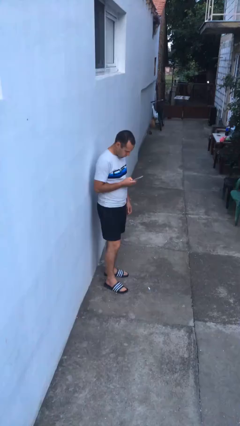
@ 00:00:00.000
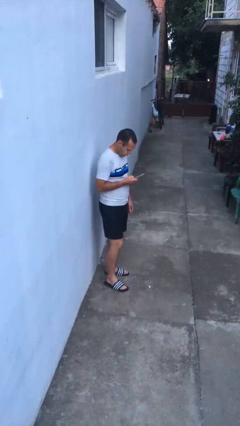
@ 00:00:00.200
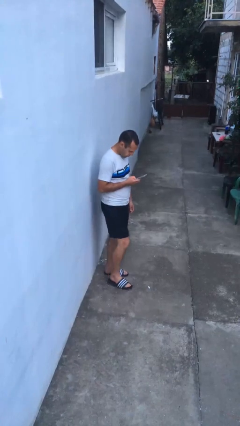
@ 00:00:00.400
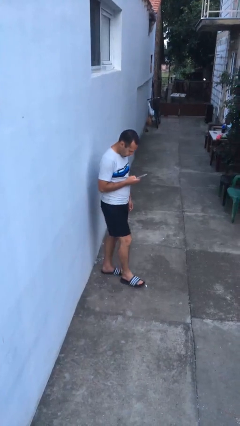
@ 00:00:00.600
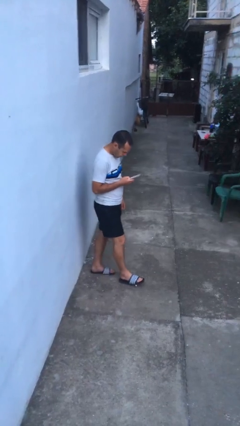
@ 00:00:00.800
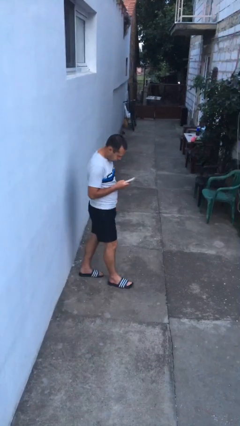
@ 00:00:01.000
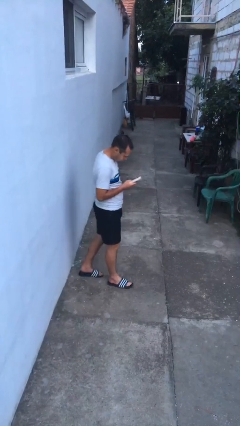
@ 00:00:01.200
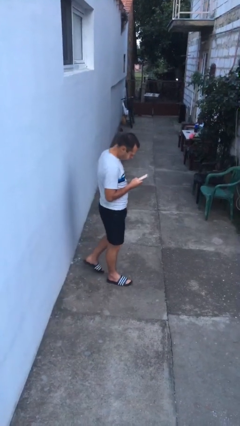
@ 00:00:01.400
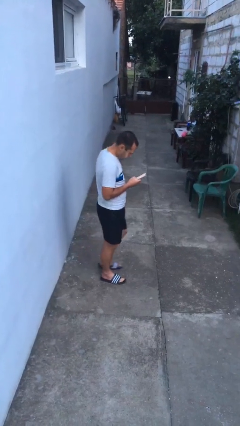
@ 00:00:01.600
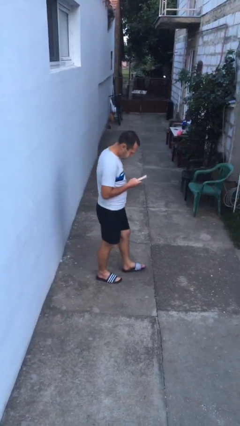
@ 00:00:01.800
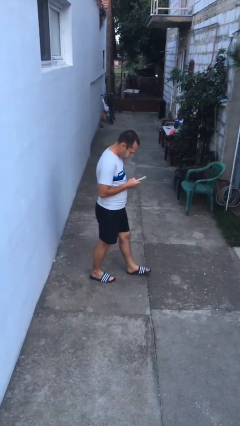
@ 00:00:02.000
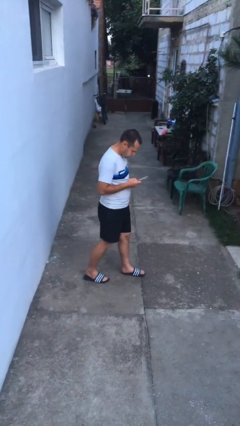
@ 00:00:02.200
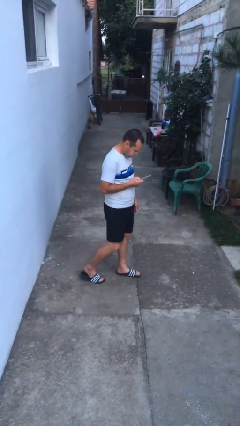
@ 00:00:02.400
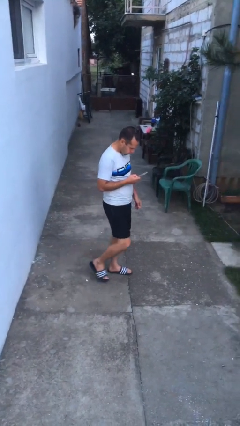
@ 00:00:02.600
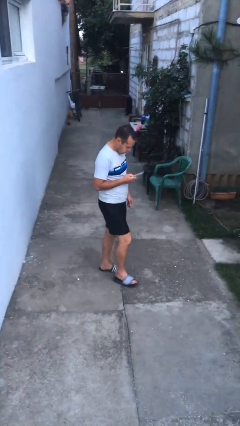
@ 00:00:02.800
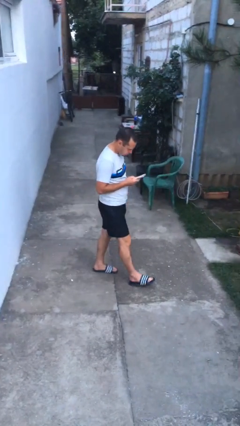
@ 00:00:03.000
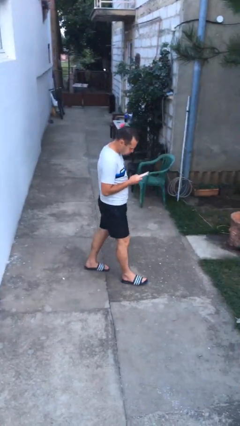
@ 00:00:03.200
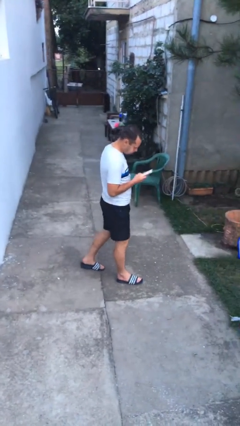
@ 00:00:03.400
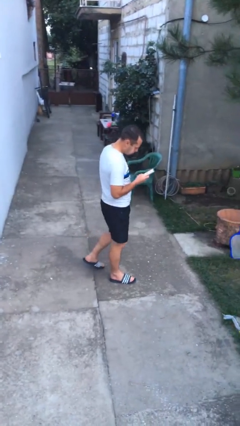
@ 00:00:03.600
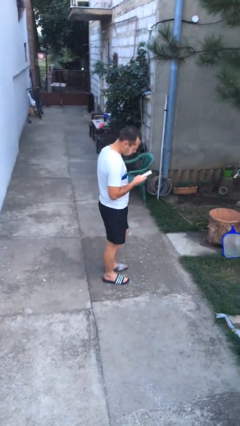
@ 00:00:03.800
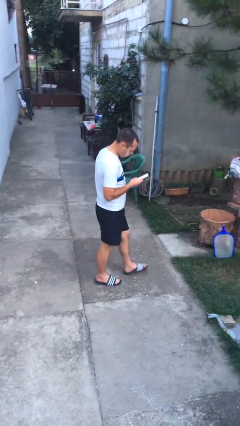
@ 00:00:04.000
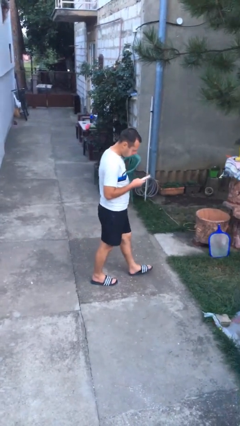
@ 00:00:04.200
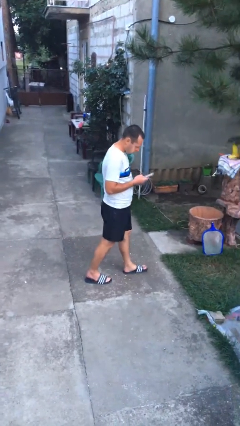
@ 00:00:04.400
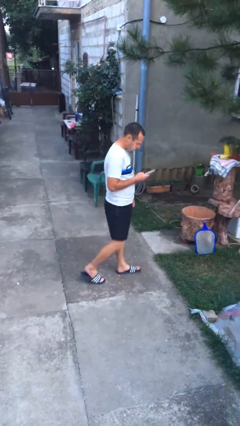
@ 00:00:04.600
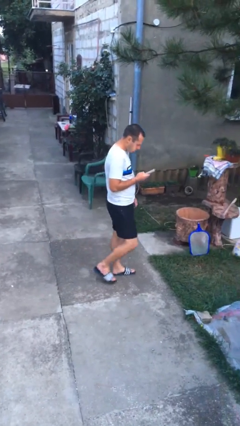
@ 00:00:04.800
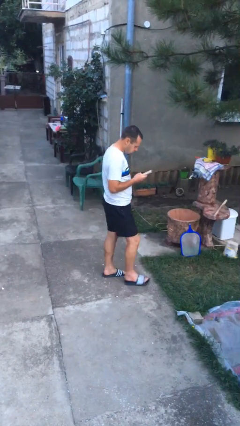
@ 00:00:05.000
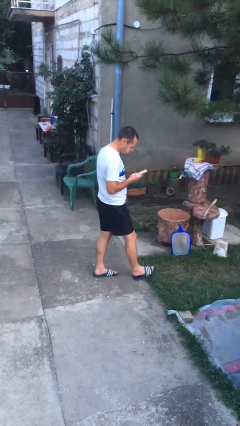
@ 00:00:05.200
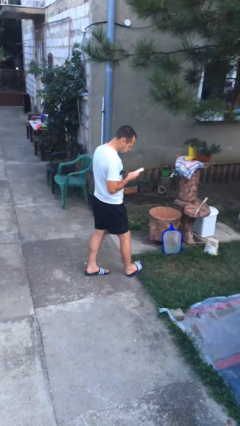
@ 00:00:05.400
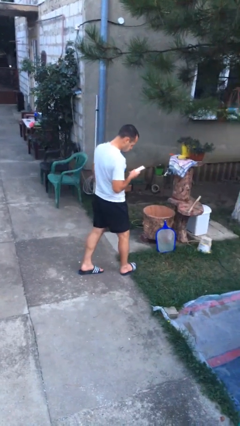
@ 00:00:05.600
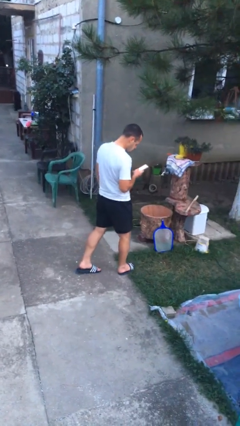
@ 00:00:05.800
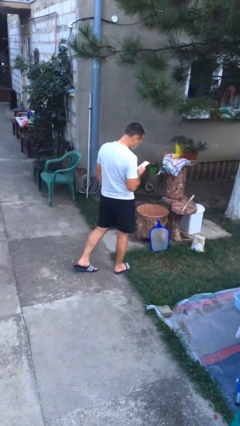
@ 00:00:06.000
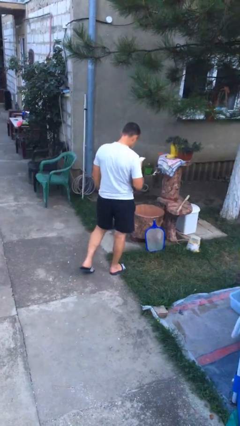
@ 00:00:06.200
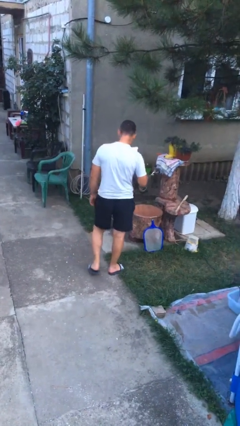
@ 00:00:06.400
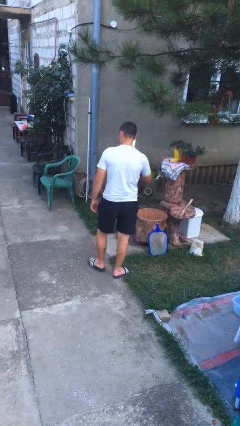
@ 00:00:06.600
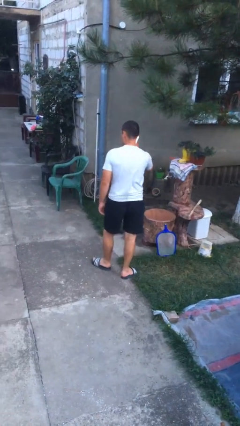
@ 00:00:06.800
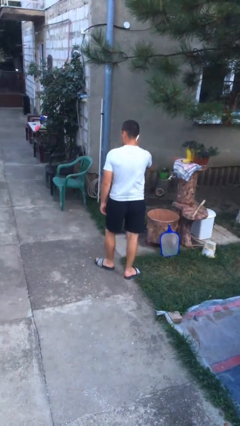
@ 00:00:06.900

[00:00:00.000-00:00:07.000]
person texts on phone

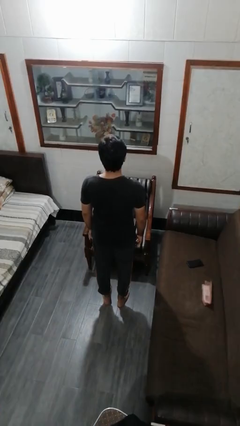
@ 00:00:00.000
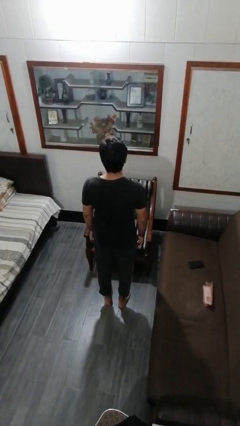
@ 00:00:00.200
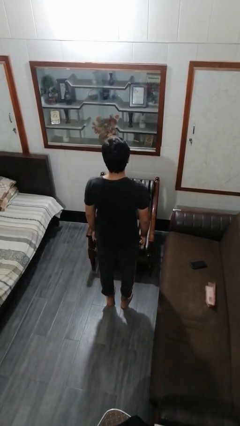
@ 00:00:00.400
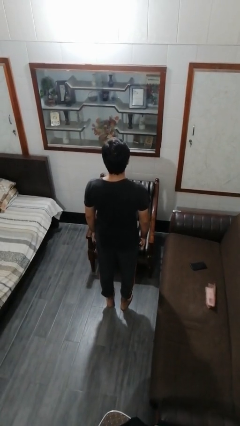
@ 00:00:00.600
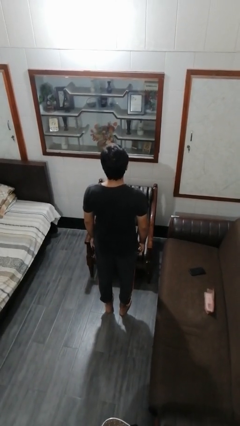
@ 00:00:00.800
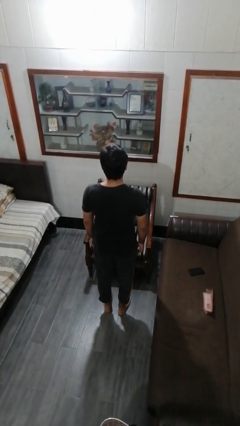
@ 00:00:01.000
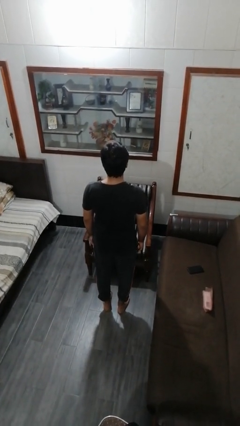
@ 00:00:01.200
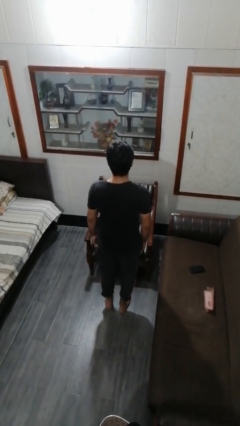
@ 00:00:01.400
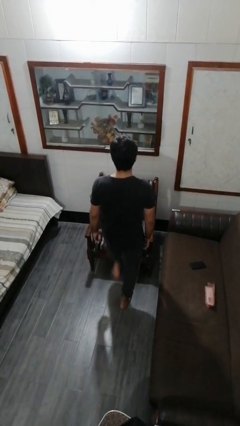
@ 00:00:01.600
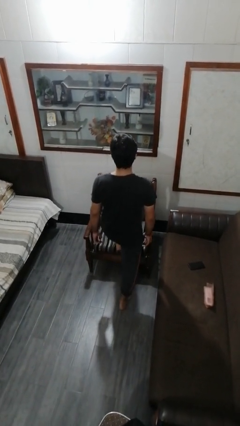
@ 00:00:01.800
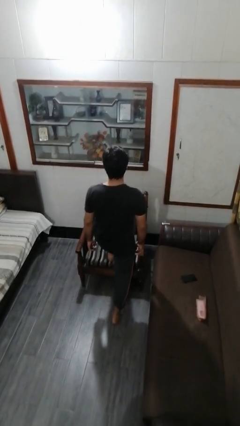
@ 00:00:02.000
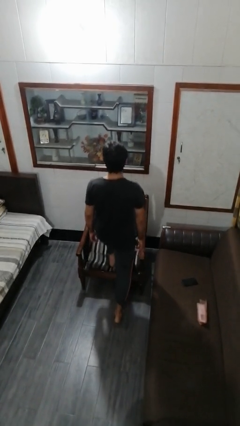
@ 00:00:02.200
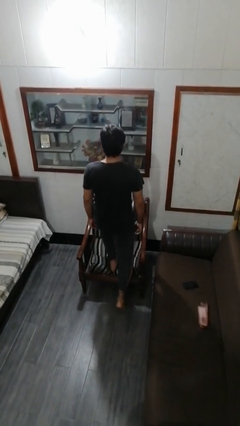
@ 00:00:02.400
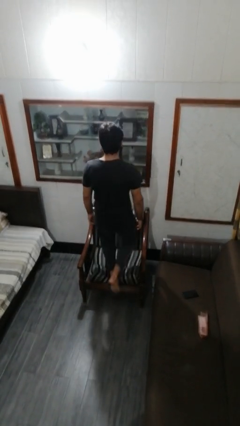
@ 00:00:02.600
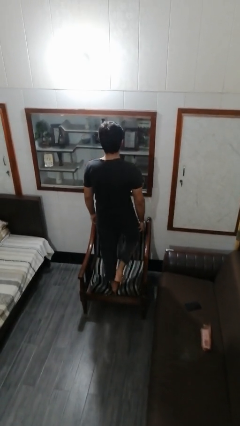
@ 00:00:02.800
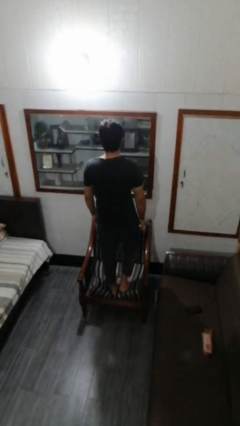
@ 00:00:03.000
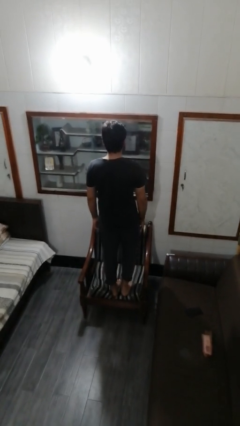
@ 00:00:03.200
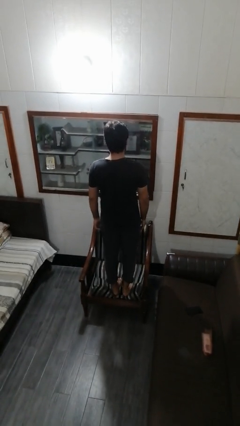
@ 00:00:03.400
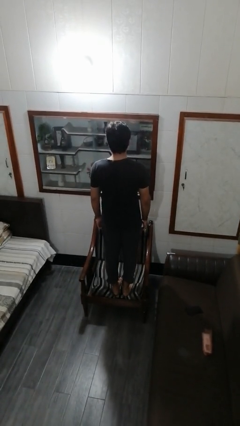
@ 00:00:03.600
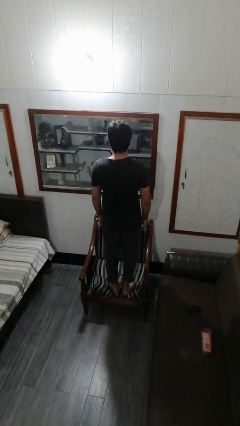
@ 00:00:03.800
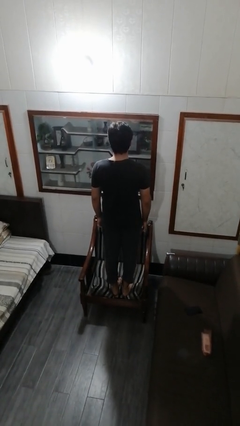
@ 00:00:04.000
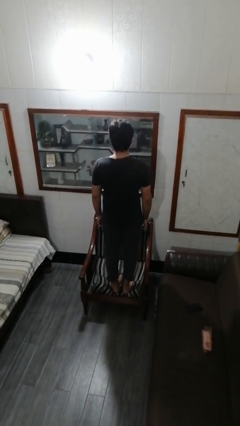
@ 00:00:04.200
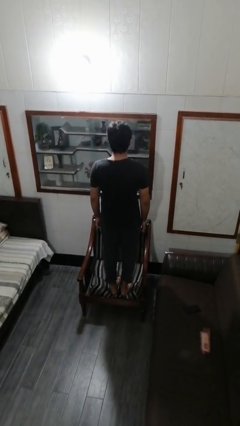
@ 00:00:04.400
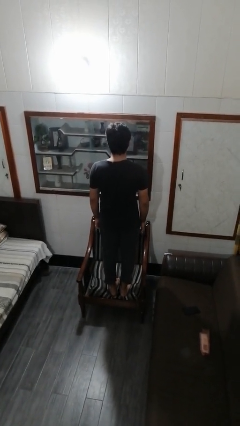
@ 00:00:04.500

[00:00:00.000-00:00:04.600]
person climbs on chair

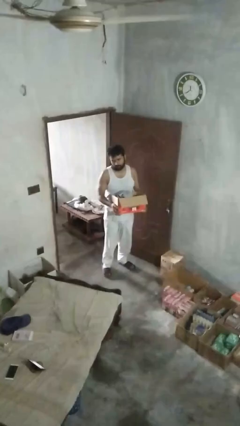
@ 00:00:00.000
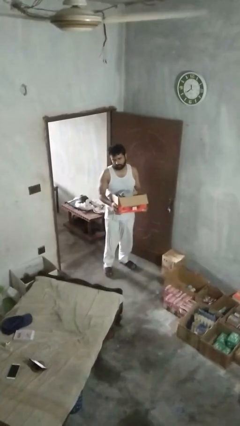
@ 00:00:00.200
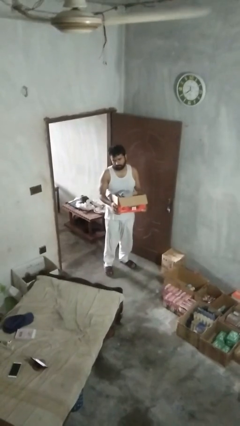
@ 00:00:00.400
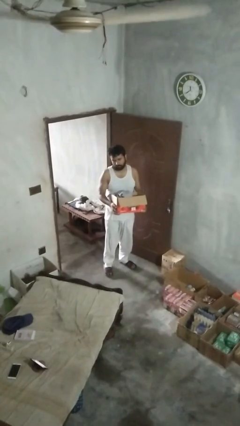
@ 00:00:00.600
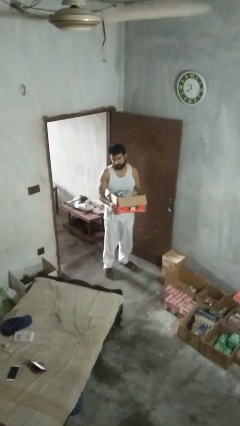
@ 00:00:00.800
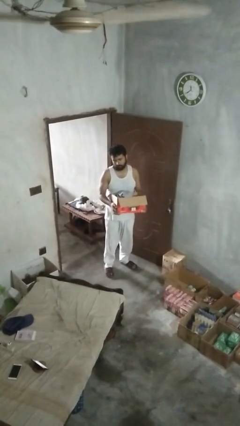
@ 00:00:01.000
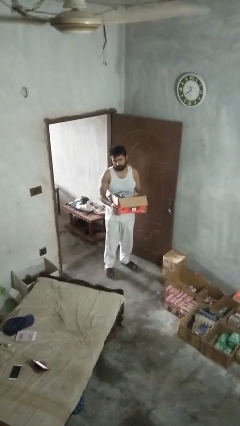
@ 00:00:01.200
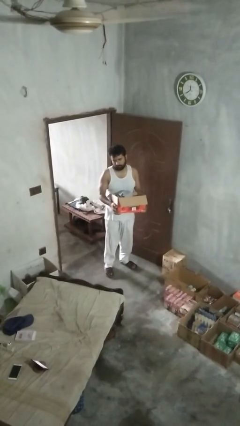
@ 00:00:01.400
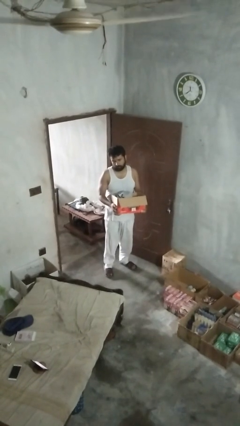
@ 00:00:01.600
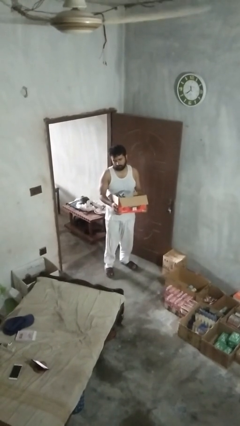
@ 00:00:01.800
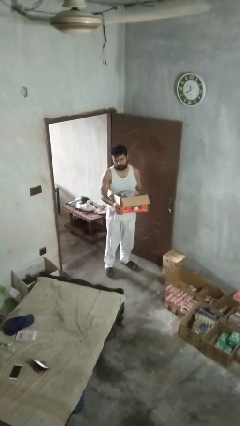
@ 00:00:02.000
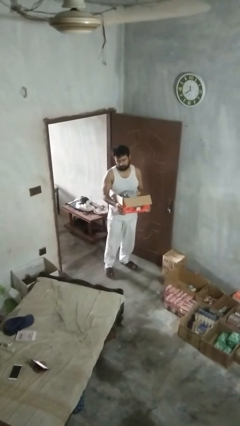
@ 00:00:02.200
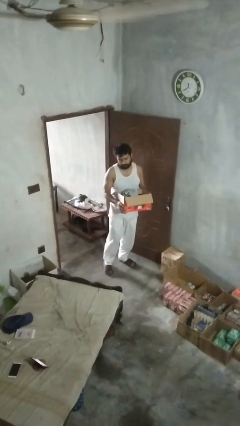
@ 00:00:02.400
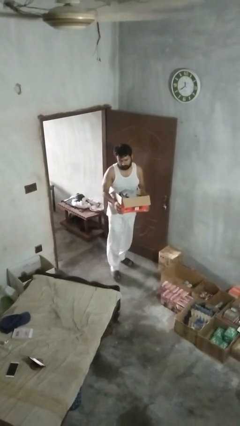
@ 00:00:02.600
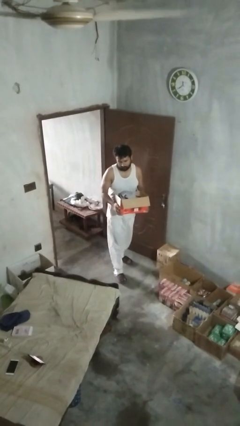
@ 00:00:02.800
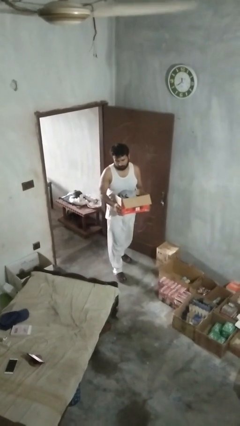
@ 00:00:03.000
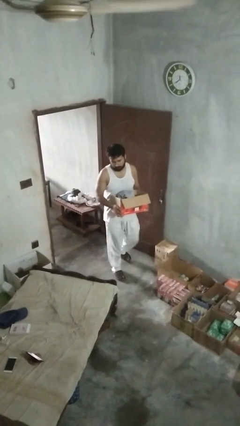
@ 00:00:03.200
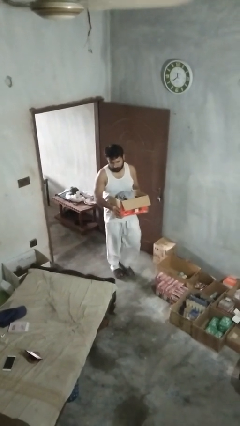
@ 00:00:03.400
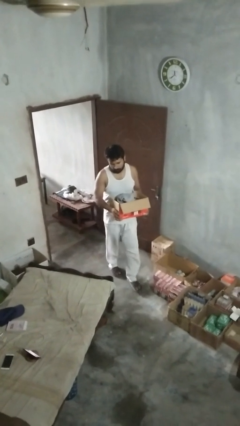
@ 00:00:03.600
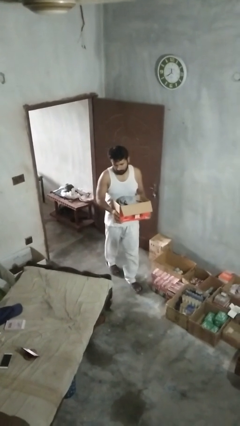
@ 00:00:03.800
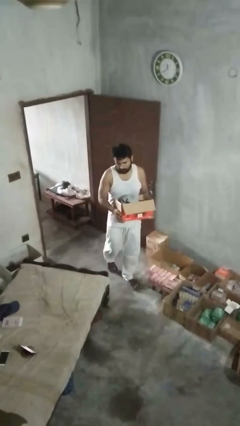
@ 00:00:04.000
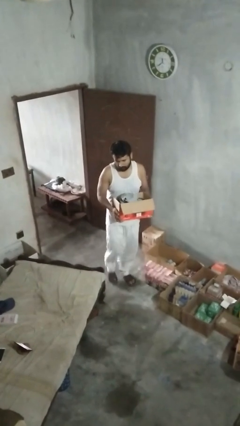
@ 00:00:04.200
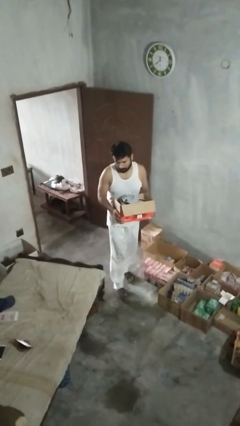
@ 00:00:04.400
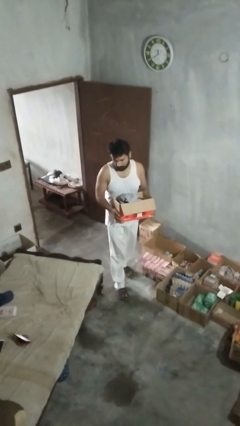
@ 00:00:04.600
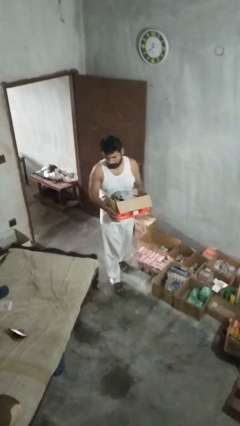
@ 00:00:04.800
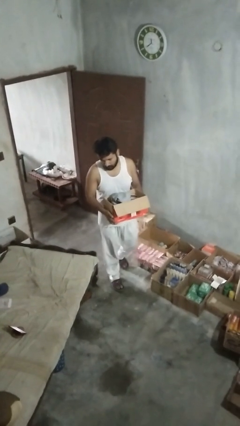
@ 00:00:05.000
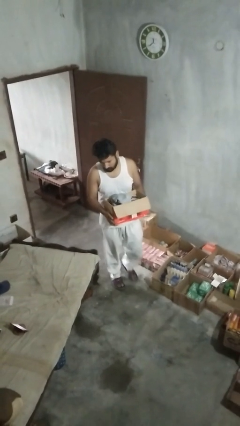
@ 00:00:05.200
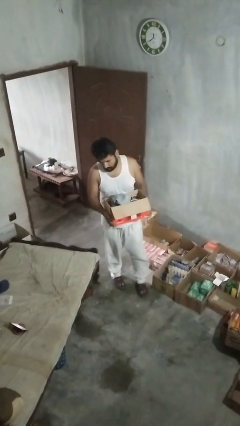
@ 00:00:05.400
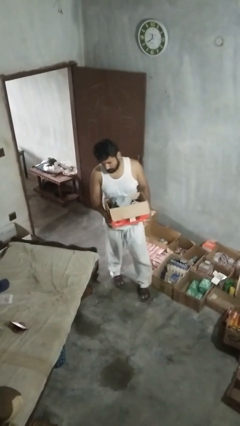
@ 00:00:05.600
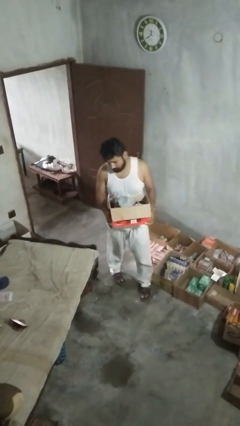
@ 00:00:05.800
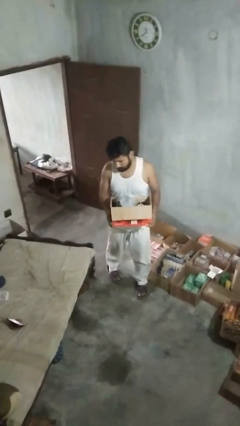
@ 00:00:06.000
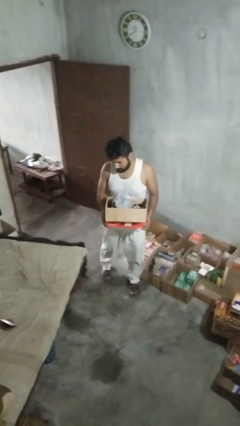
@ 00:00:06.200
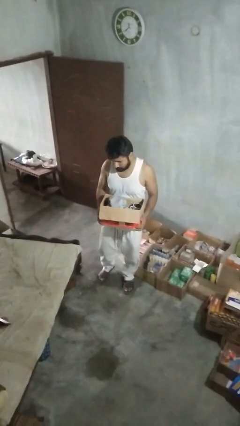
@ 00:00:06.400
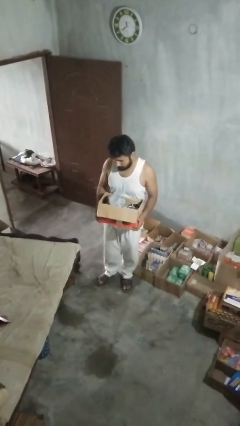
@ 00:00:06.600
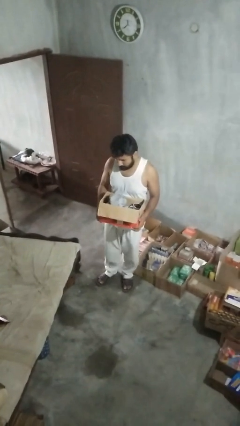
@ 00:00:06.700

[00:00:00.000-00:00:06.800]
person carries laundry basket
